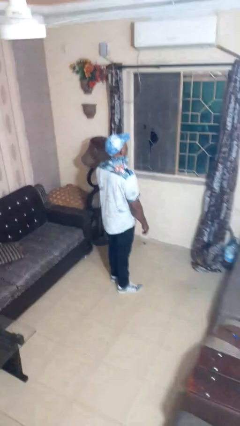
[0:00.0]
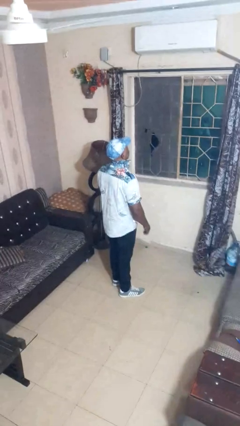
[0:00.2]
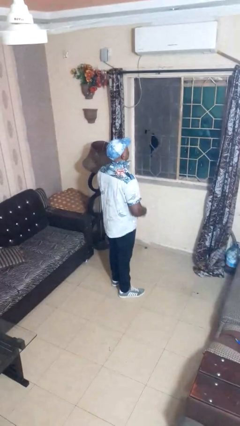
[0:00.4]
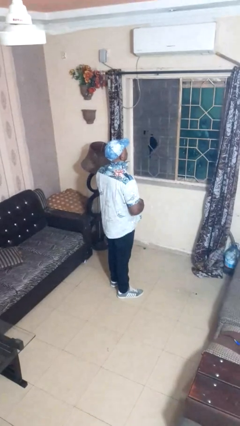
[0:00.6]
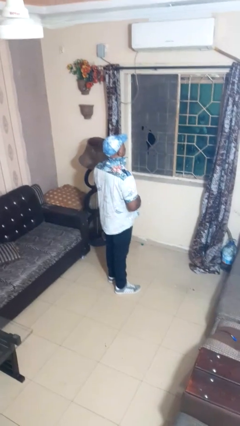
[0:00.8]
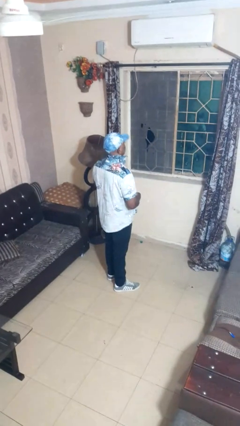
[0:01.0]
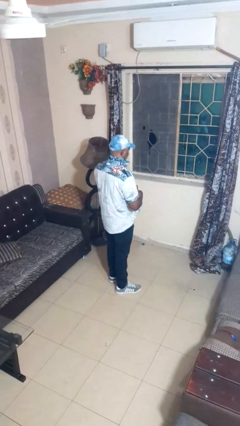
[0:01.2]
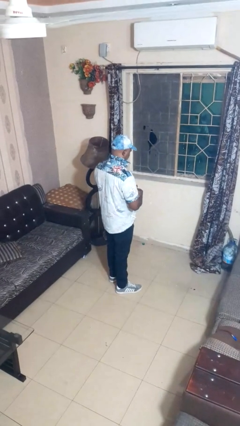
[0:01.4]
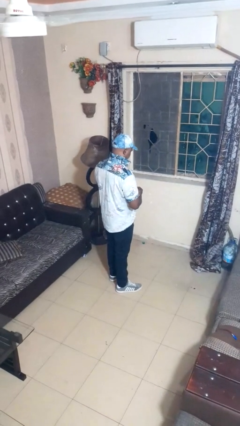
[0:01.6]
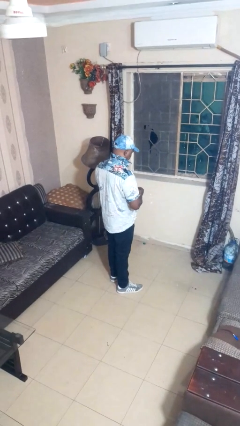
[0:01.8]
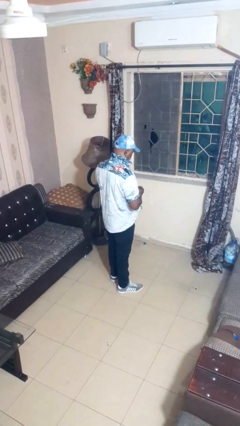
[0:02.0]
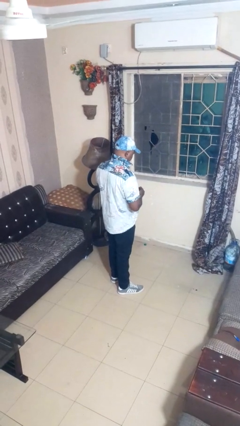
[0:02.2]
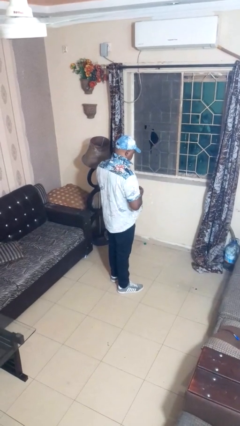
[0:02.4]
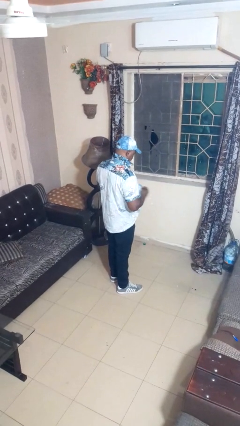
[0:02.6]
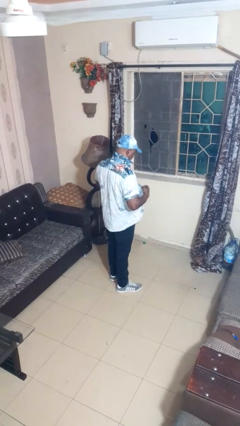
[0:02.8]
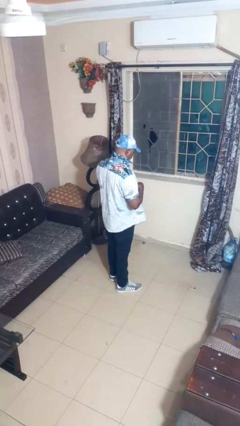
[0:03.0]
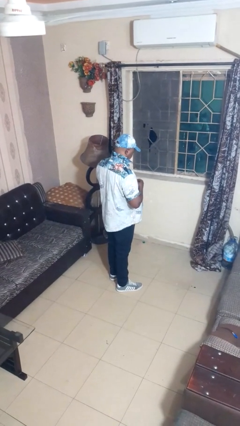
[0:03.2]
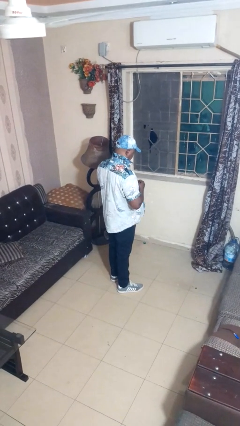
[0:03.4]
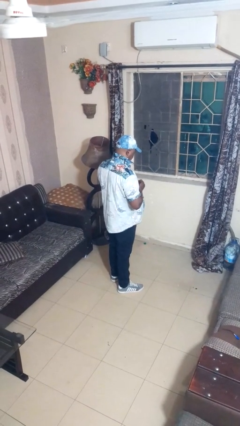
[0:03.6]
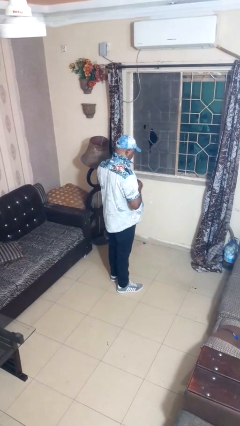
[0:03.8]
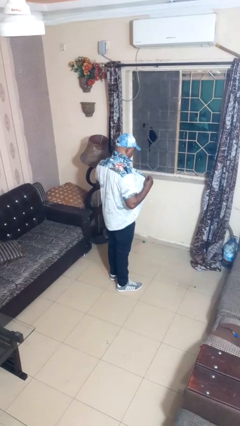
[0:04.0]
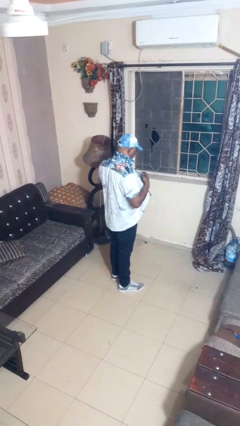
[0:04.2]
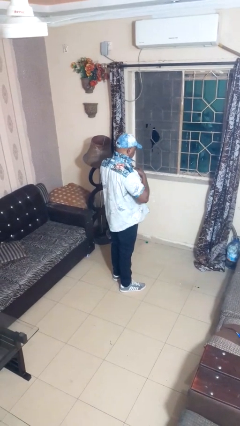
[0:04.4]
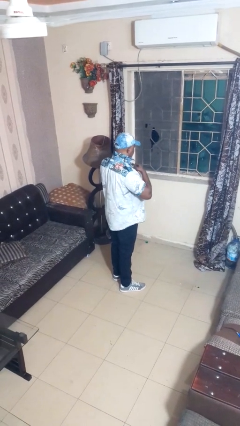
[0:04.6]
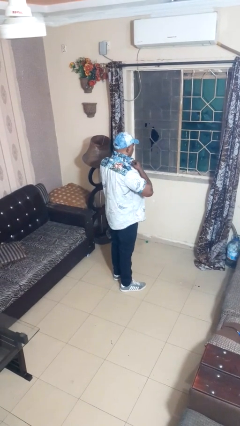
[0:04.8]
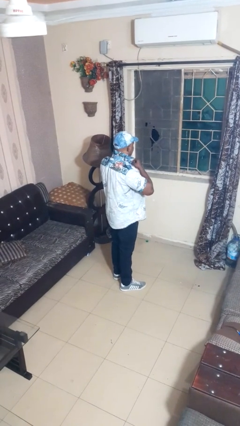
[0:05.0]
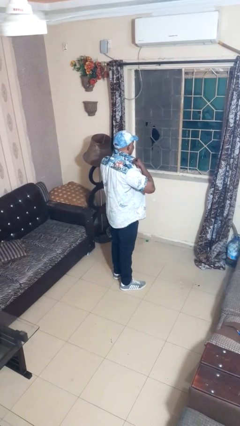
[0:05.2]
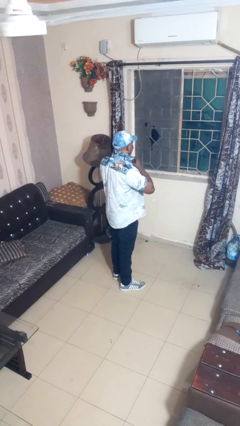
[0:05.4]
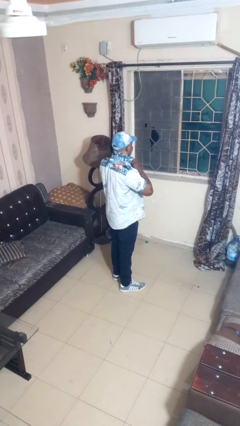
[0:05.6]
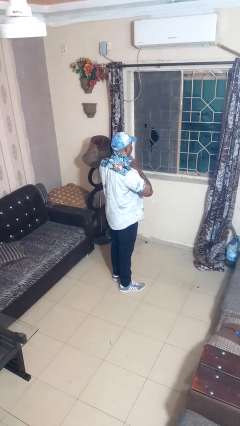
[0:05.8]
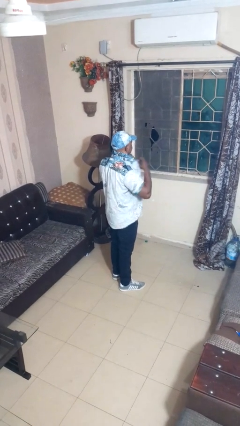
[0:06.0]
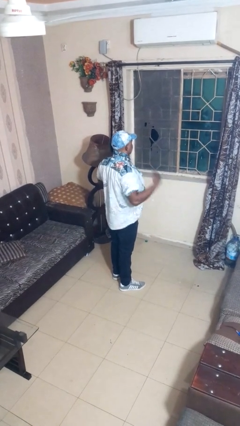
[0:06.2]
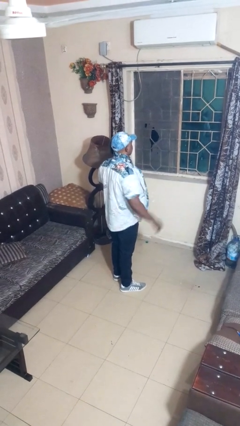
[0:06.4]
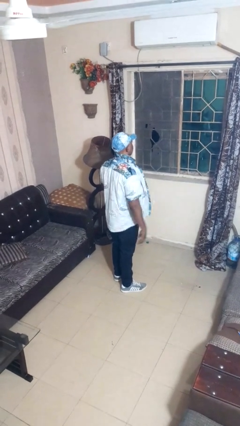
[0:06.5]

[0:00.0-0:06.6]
person unbuttons shirt

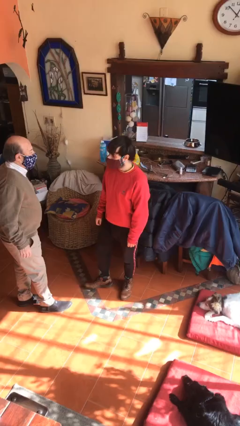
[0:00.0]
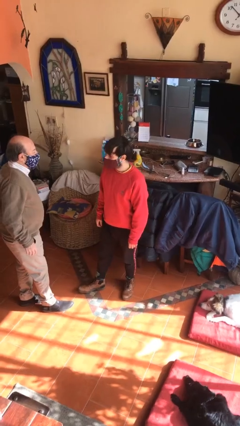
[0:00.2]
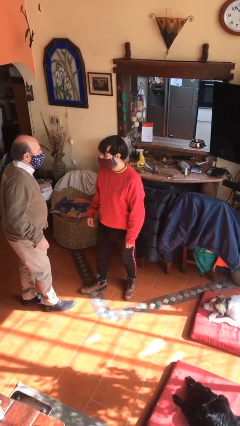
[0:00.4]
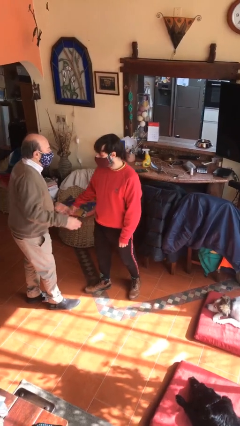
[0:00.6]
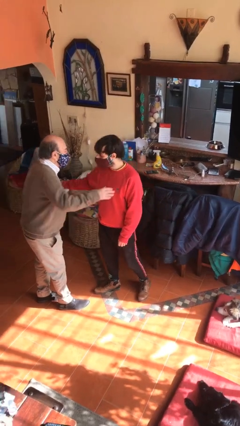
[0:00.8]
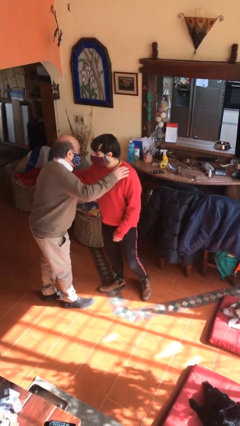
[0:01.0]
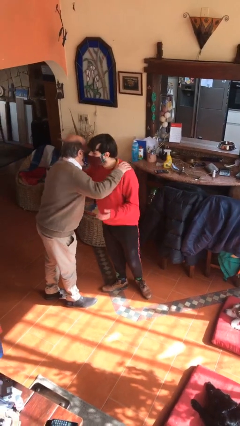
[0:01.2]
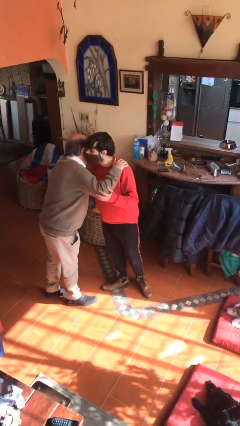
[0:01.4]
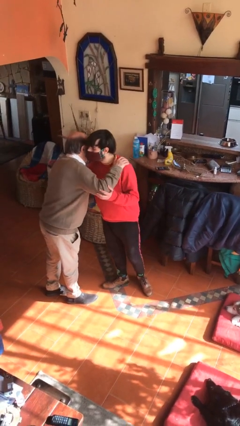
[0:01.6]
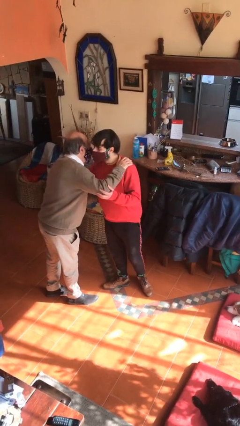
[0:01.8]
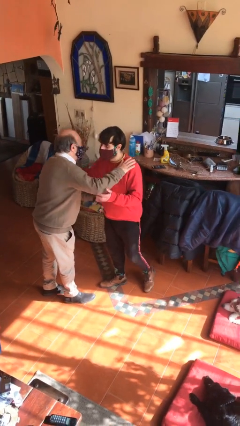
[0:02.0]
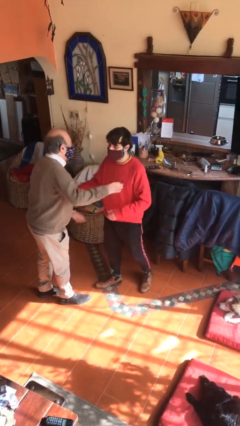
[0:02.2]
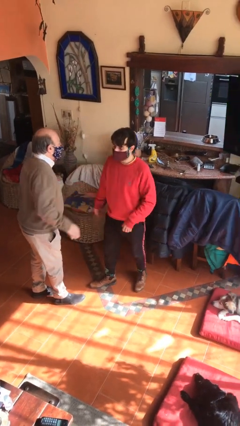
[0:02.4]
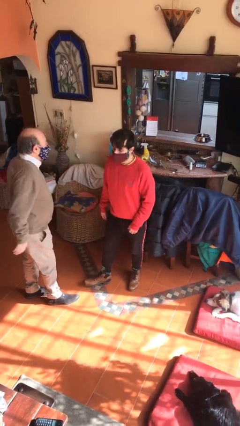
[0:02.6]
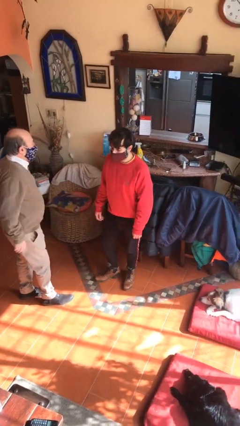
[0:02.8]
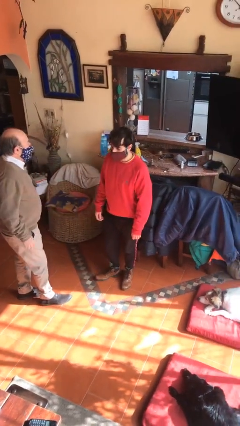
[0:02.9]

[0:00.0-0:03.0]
person kisses cheek of person

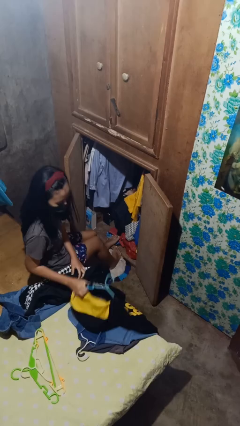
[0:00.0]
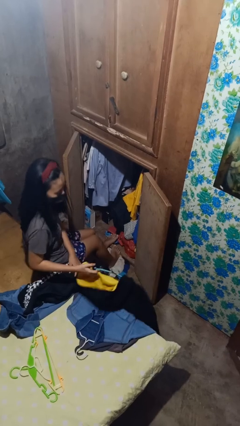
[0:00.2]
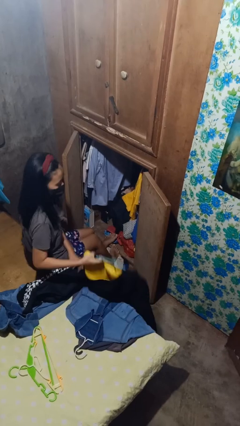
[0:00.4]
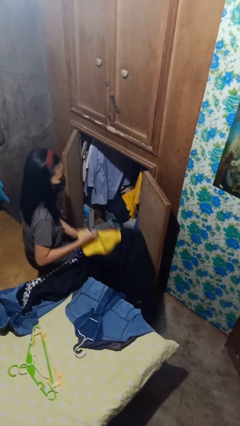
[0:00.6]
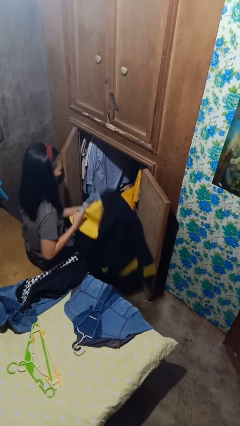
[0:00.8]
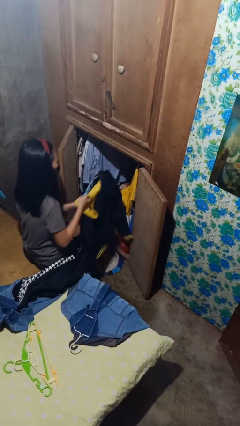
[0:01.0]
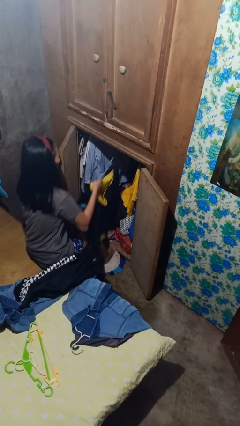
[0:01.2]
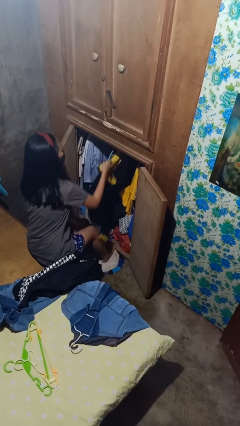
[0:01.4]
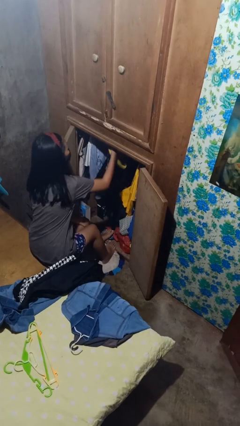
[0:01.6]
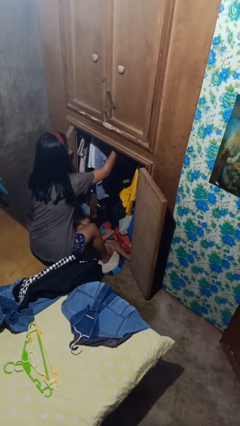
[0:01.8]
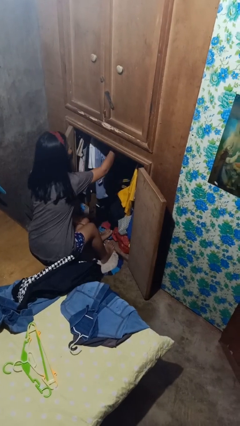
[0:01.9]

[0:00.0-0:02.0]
person puts clothes into closet

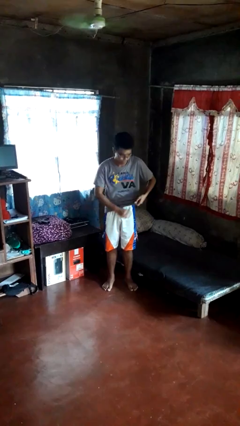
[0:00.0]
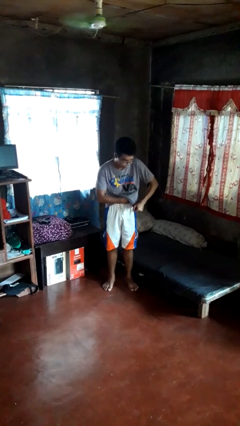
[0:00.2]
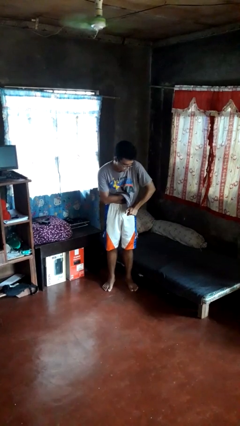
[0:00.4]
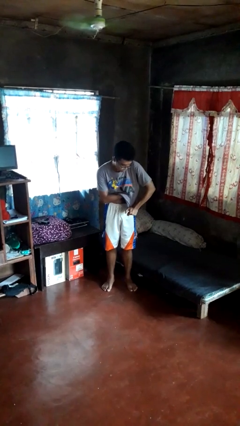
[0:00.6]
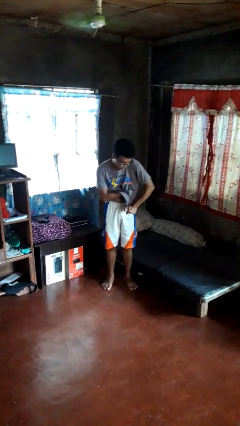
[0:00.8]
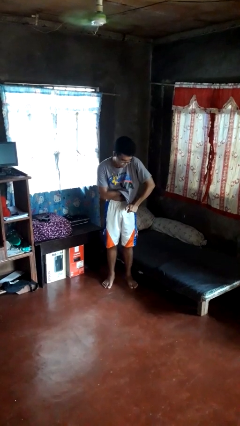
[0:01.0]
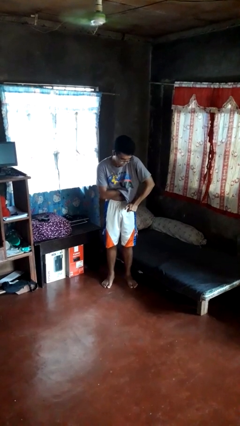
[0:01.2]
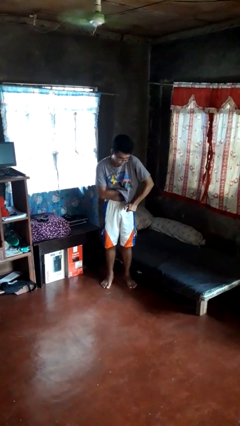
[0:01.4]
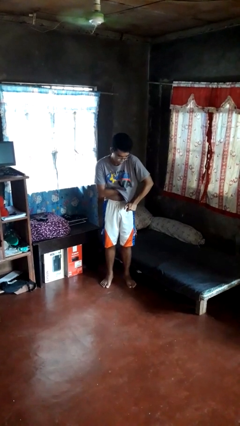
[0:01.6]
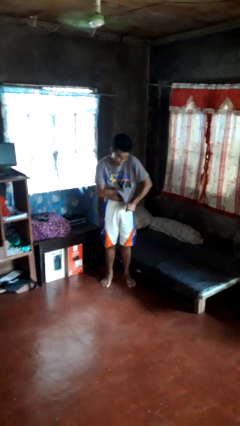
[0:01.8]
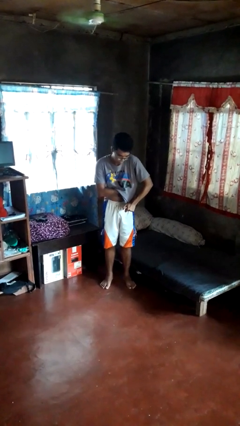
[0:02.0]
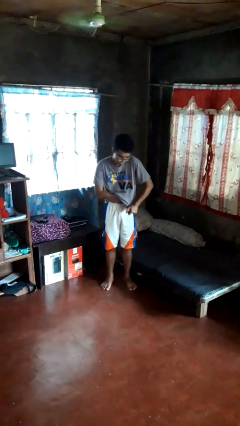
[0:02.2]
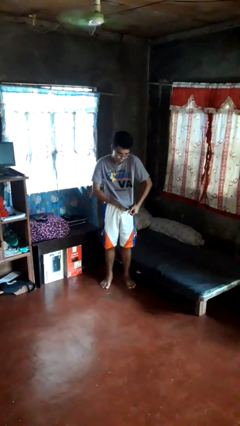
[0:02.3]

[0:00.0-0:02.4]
person applies deodorant

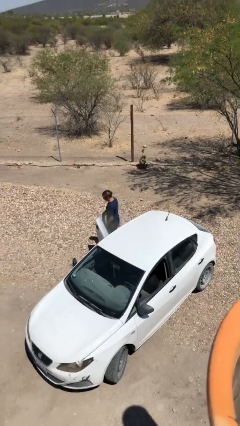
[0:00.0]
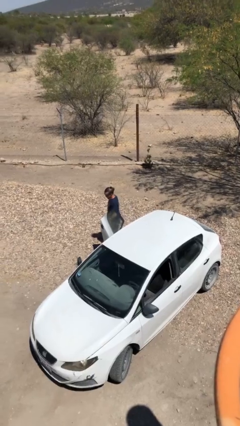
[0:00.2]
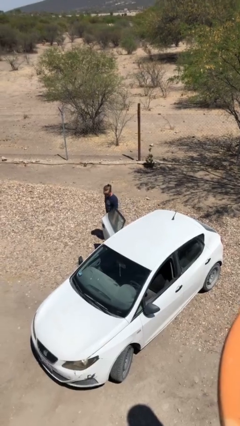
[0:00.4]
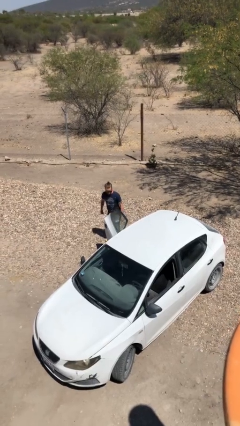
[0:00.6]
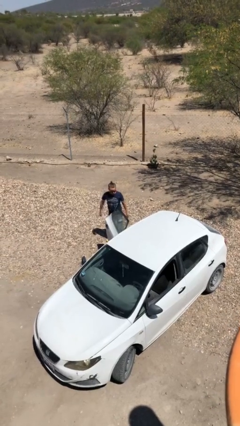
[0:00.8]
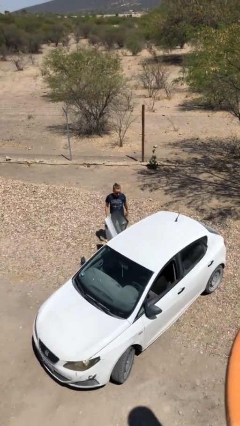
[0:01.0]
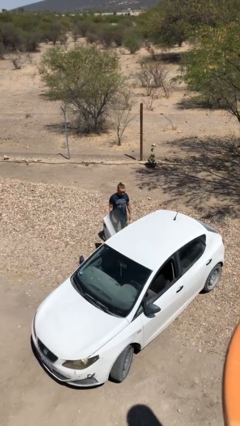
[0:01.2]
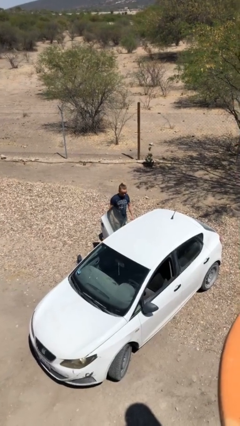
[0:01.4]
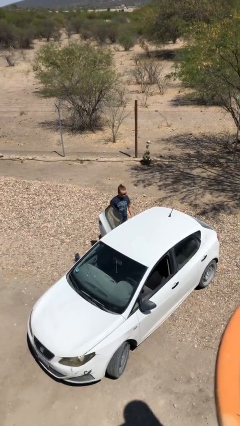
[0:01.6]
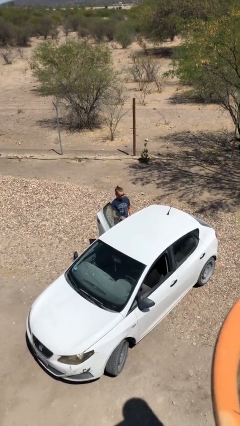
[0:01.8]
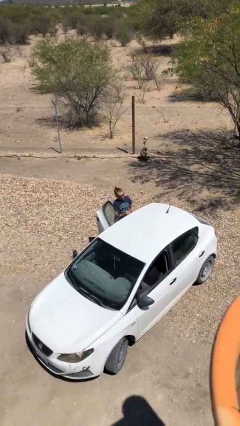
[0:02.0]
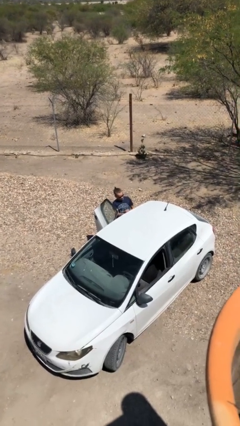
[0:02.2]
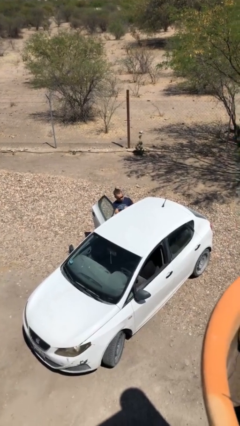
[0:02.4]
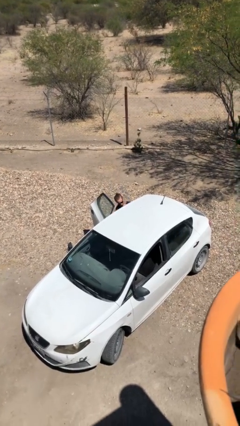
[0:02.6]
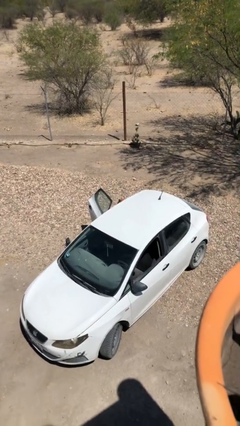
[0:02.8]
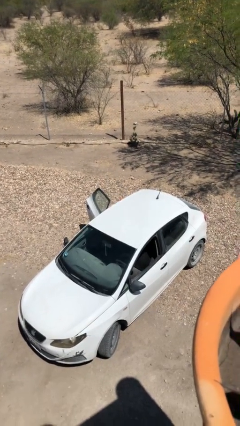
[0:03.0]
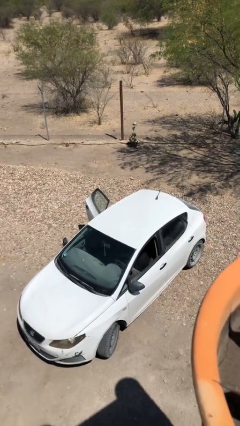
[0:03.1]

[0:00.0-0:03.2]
person enters car

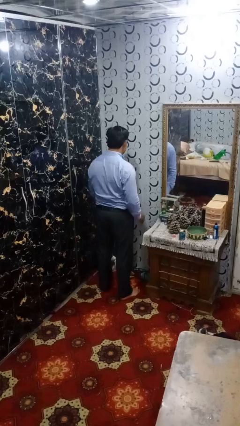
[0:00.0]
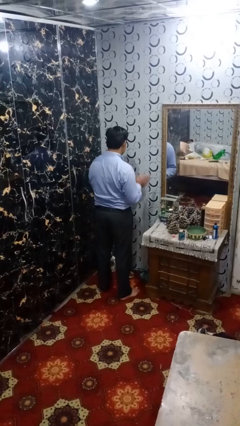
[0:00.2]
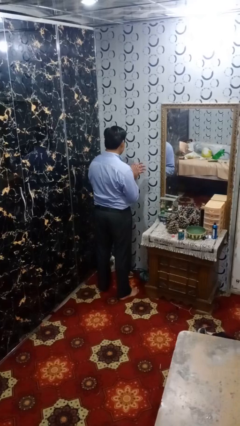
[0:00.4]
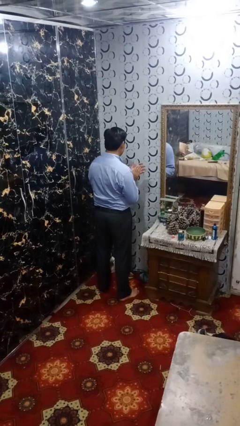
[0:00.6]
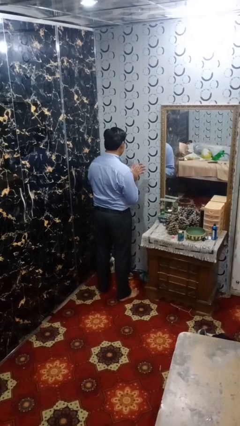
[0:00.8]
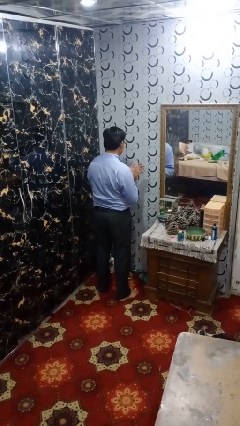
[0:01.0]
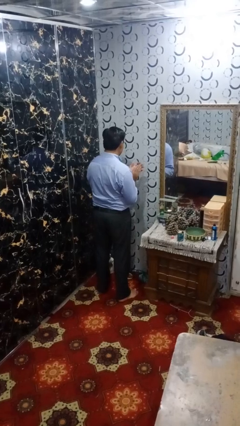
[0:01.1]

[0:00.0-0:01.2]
person claps hands
